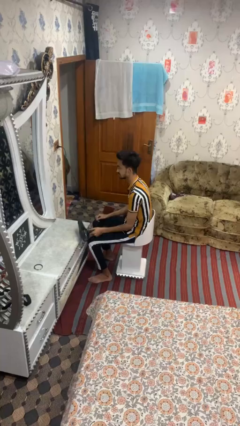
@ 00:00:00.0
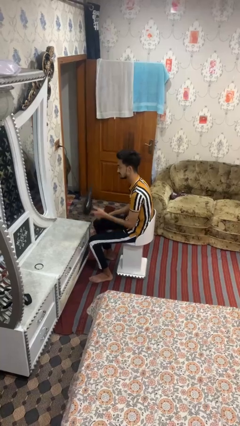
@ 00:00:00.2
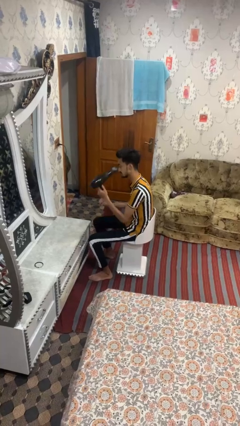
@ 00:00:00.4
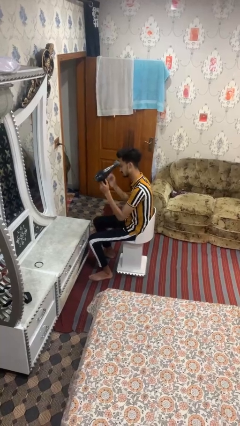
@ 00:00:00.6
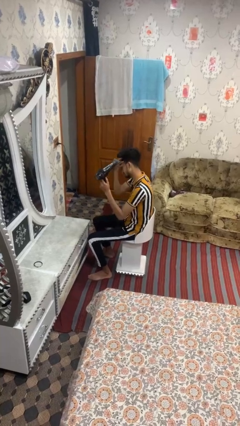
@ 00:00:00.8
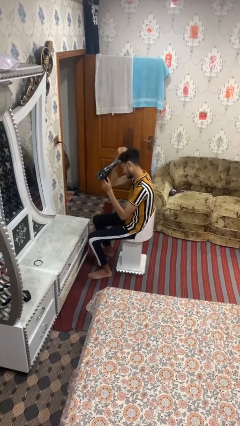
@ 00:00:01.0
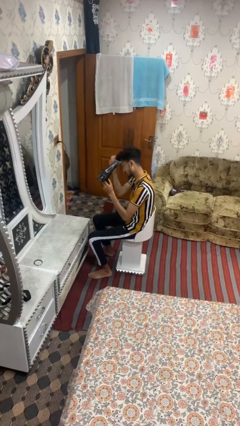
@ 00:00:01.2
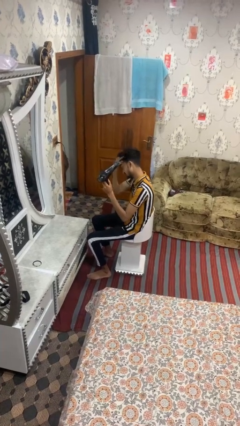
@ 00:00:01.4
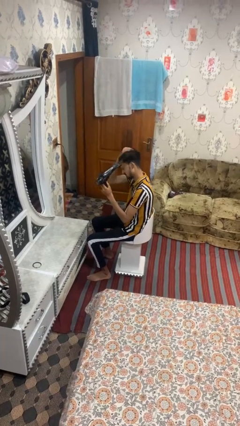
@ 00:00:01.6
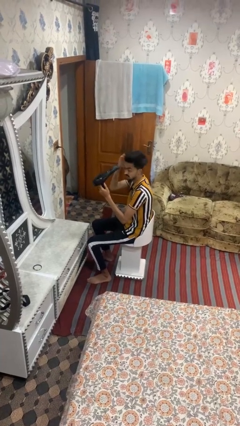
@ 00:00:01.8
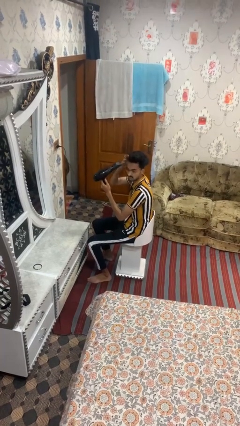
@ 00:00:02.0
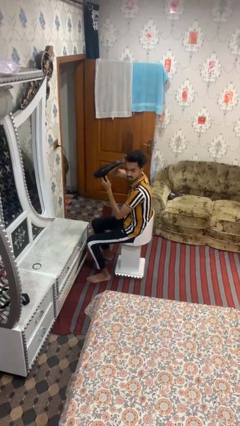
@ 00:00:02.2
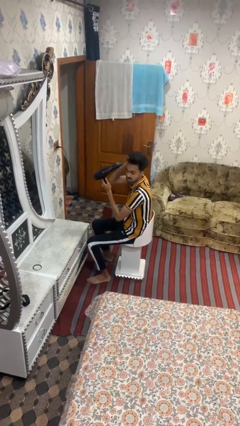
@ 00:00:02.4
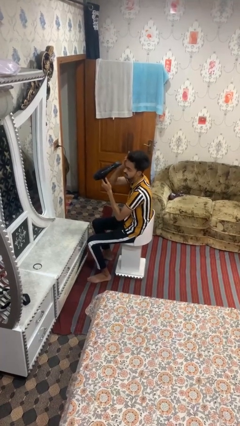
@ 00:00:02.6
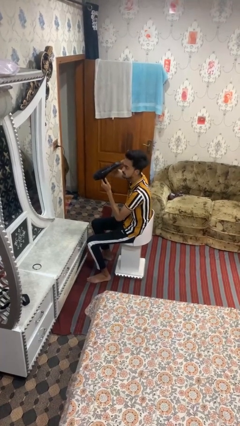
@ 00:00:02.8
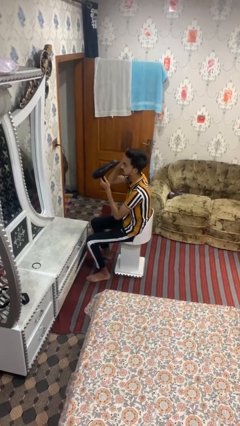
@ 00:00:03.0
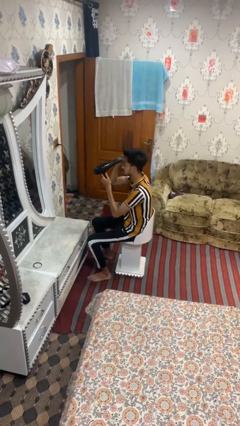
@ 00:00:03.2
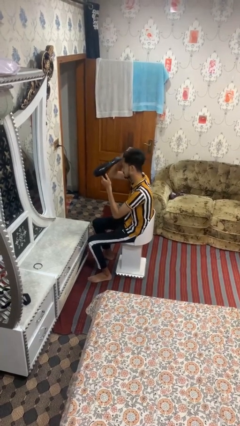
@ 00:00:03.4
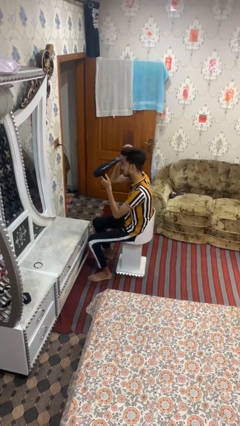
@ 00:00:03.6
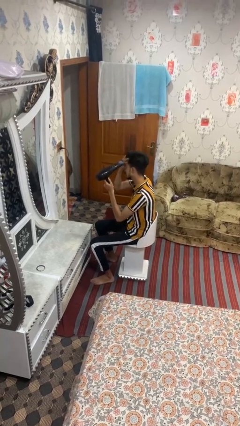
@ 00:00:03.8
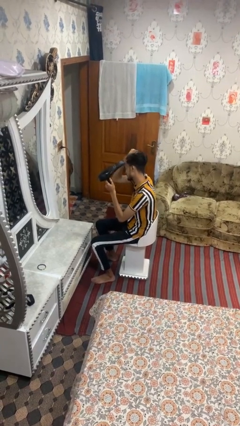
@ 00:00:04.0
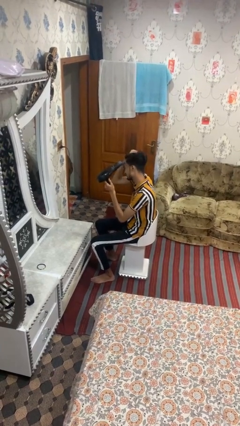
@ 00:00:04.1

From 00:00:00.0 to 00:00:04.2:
person dries hair with hairdryer

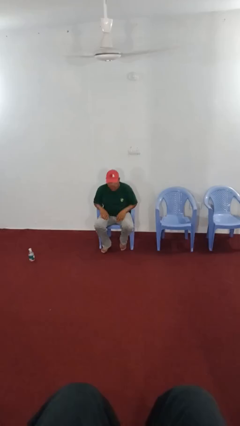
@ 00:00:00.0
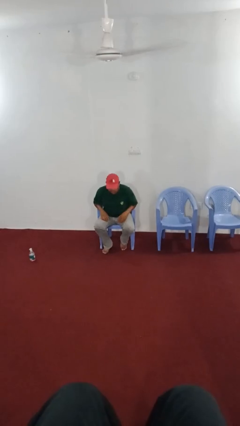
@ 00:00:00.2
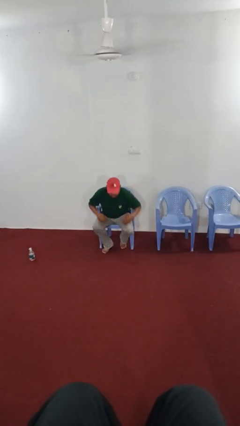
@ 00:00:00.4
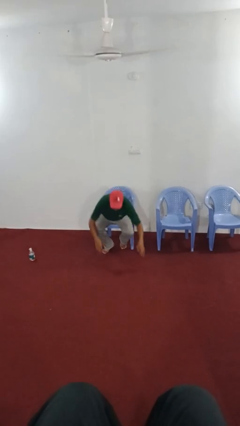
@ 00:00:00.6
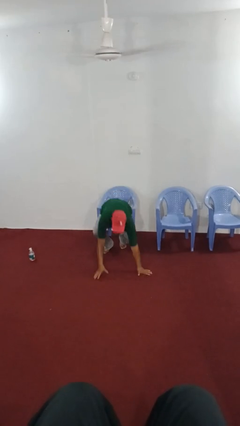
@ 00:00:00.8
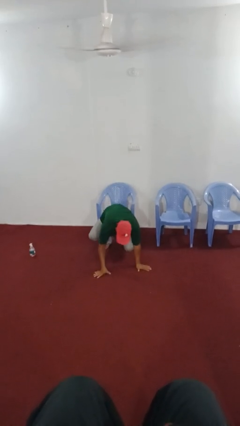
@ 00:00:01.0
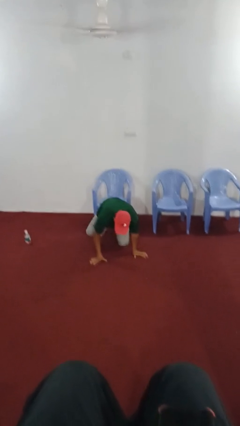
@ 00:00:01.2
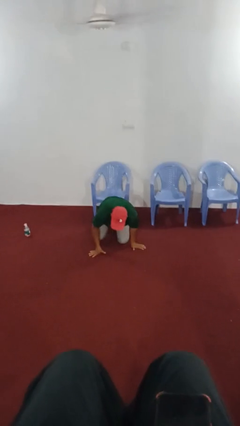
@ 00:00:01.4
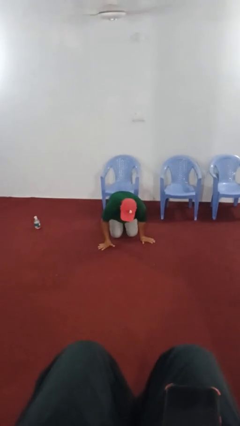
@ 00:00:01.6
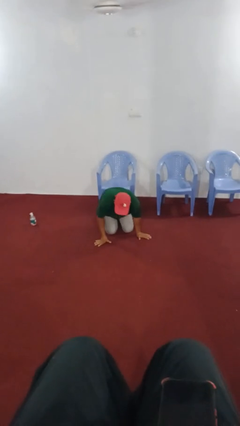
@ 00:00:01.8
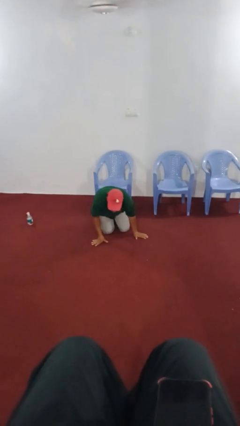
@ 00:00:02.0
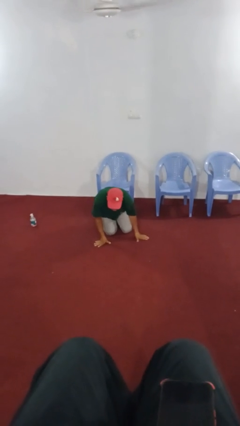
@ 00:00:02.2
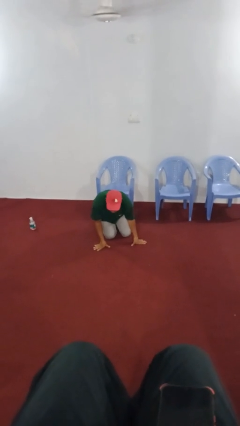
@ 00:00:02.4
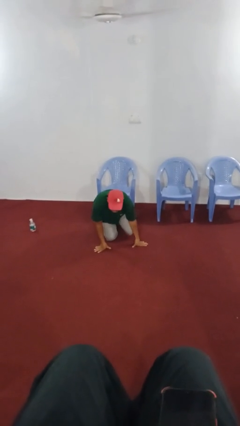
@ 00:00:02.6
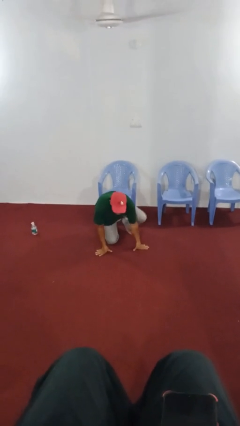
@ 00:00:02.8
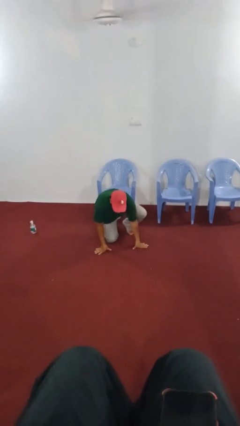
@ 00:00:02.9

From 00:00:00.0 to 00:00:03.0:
person falls from chair

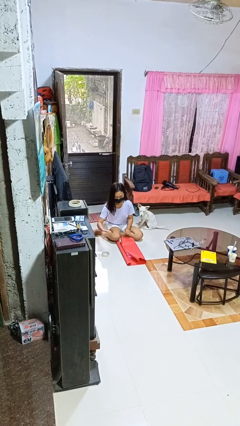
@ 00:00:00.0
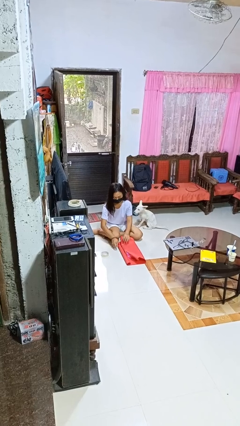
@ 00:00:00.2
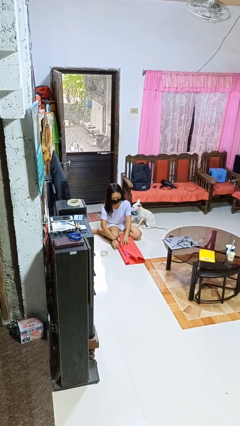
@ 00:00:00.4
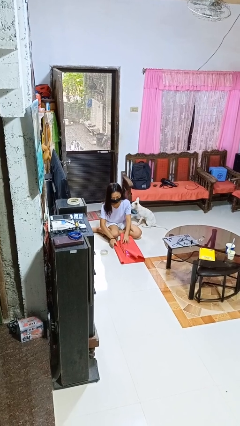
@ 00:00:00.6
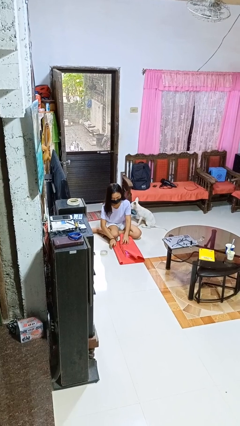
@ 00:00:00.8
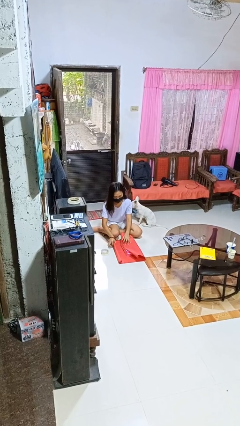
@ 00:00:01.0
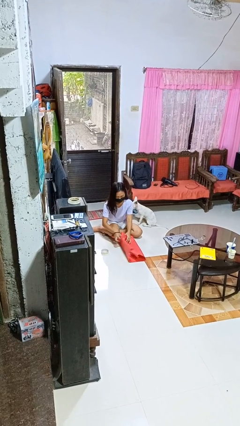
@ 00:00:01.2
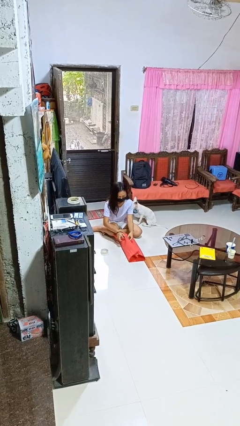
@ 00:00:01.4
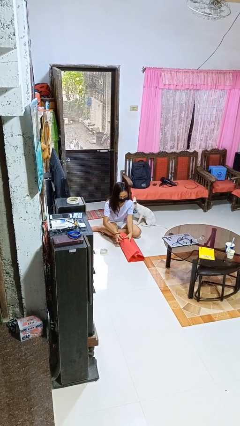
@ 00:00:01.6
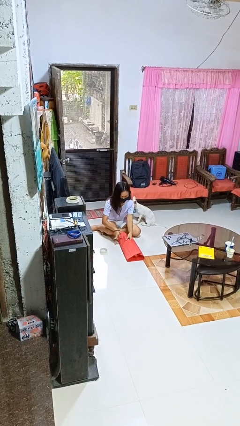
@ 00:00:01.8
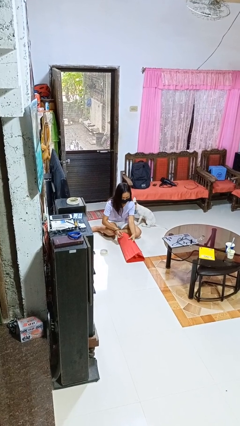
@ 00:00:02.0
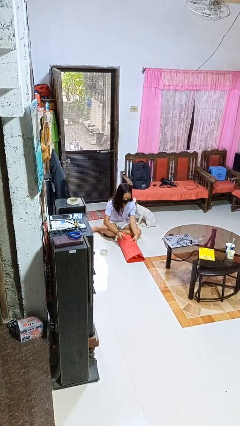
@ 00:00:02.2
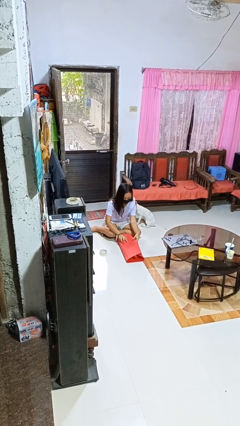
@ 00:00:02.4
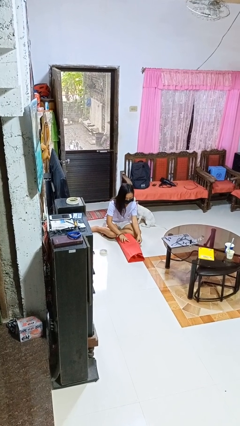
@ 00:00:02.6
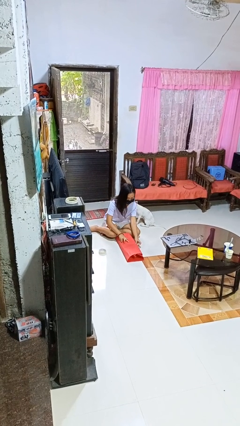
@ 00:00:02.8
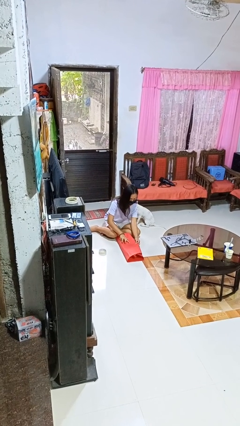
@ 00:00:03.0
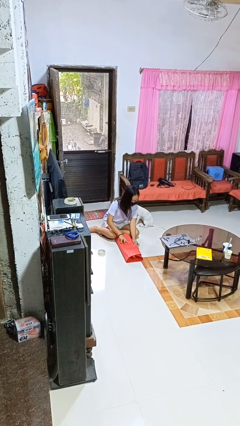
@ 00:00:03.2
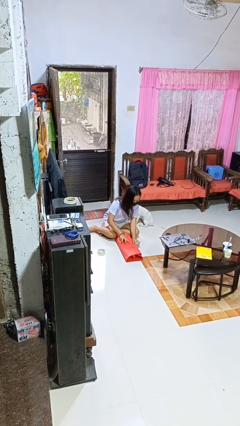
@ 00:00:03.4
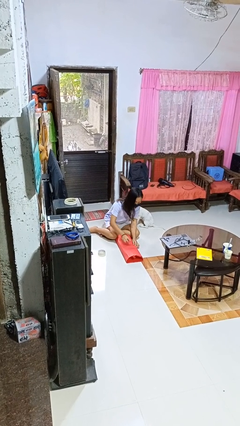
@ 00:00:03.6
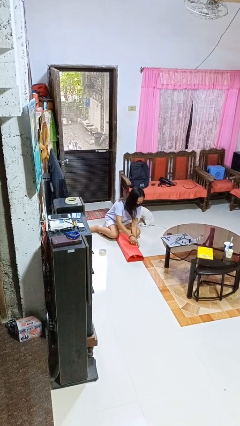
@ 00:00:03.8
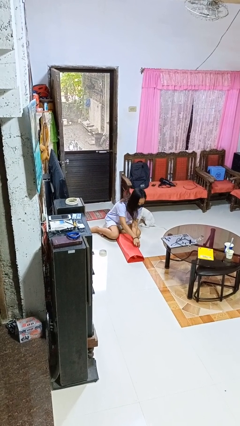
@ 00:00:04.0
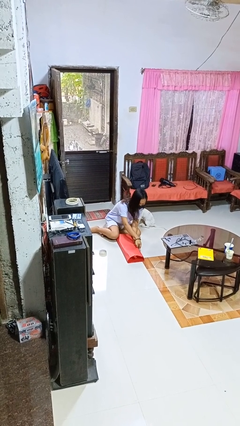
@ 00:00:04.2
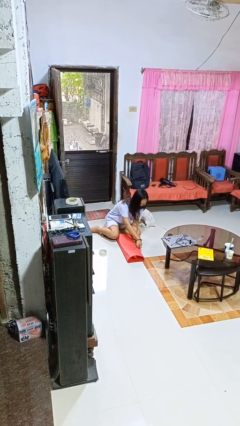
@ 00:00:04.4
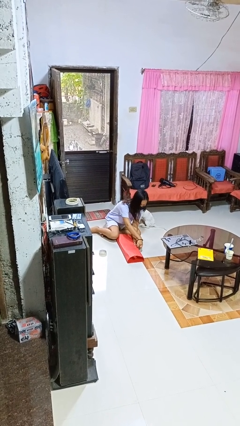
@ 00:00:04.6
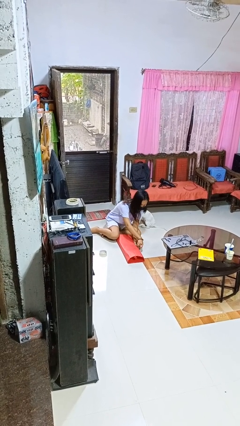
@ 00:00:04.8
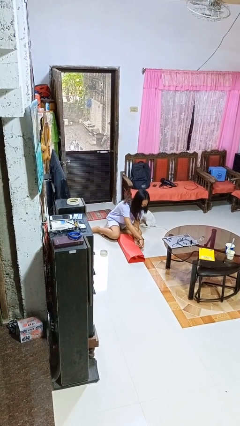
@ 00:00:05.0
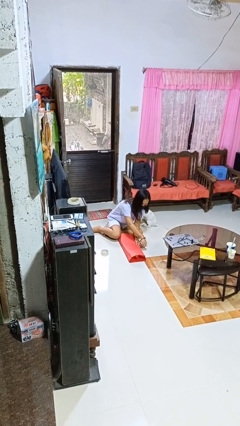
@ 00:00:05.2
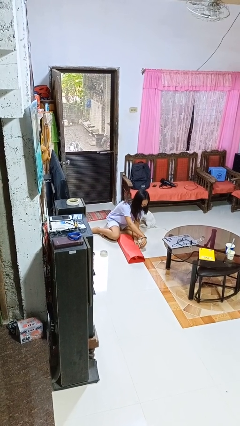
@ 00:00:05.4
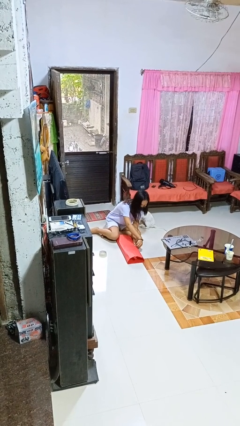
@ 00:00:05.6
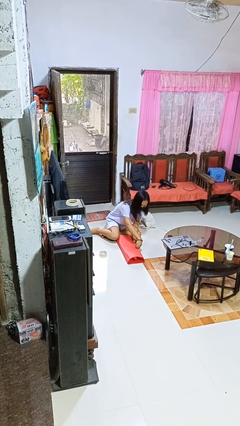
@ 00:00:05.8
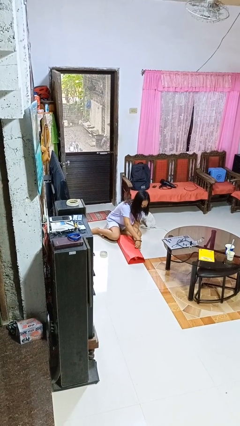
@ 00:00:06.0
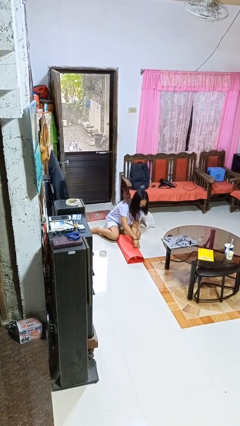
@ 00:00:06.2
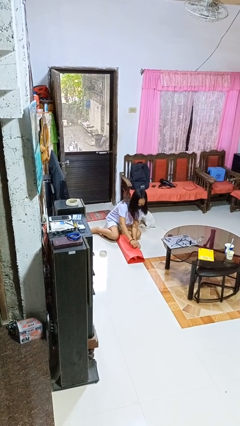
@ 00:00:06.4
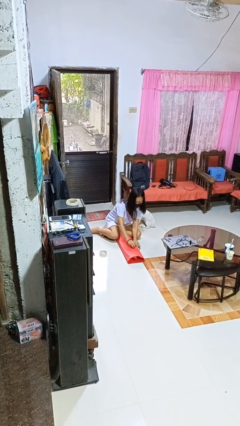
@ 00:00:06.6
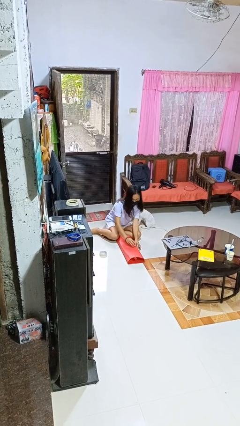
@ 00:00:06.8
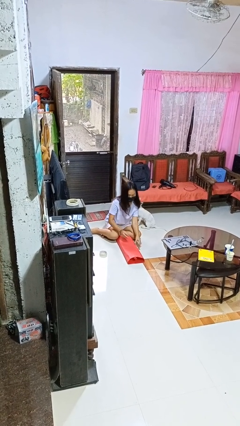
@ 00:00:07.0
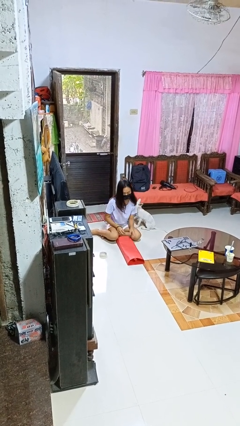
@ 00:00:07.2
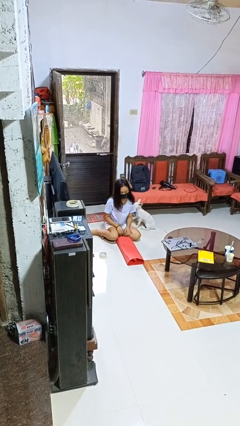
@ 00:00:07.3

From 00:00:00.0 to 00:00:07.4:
person wraps box

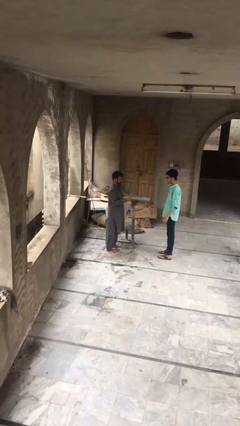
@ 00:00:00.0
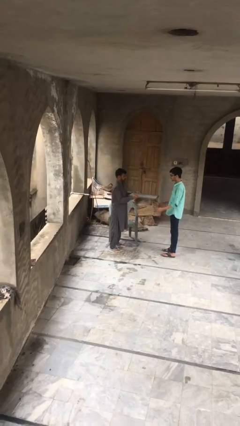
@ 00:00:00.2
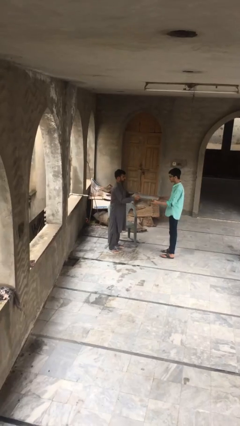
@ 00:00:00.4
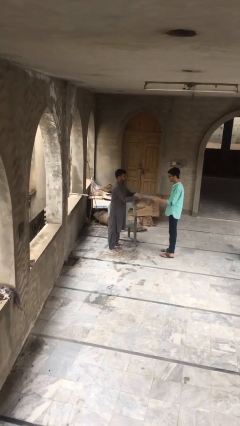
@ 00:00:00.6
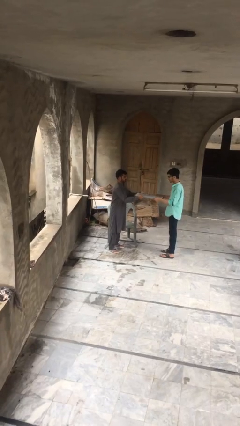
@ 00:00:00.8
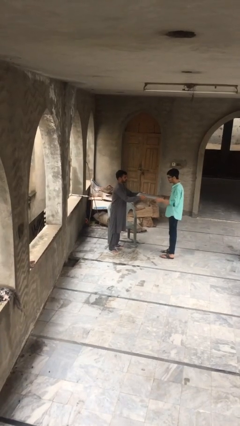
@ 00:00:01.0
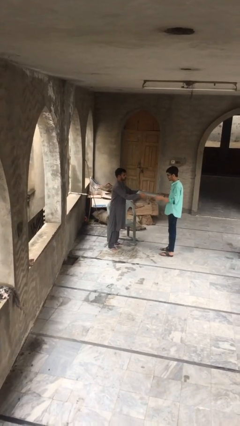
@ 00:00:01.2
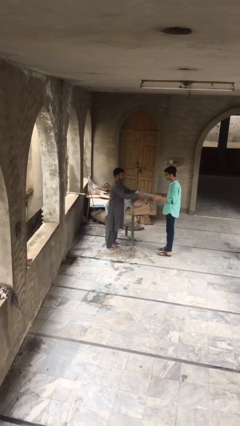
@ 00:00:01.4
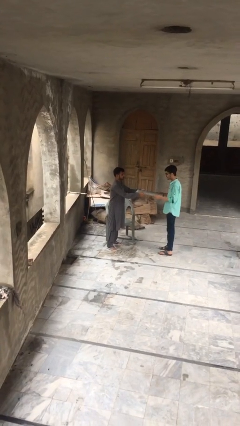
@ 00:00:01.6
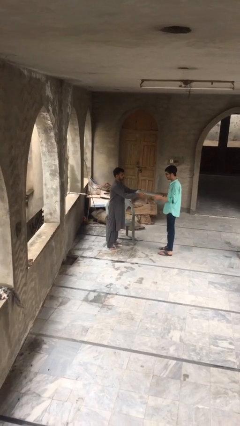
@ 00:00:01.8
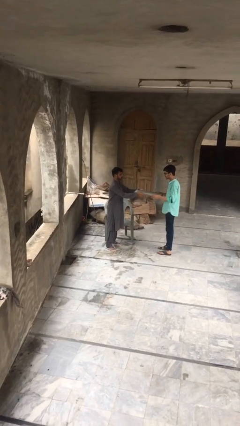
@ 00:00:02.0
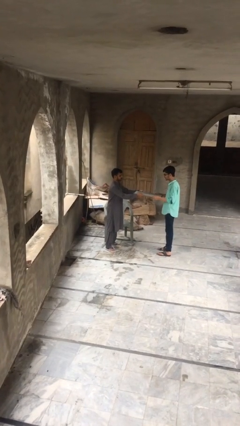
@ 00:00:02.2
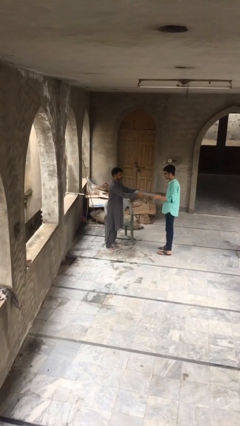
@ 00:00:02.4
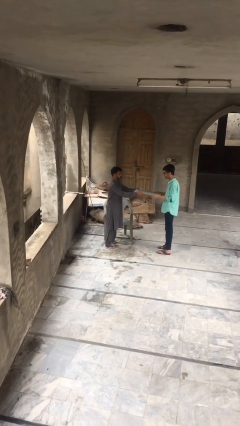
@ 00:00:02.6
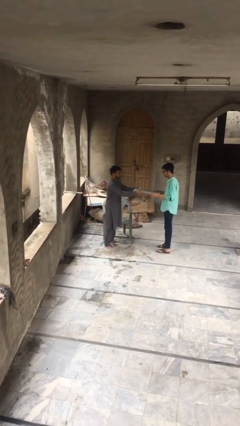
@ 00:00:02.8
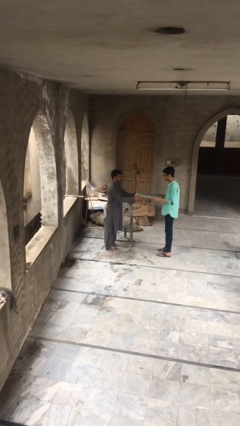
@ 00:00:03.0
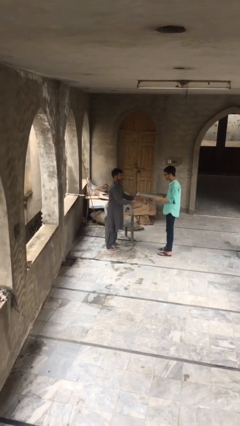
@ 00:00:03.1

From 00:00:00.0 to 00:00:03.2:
person transfers object to person
